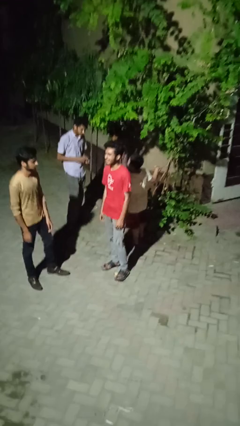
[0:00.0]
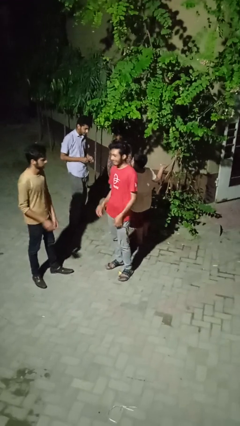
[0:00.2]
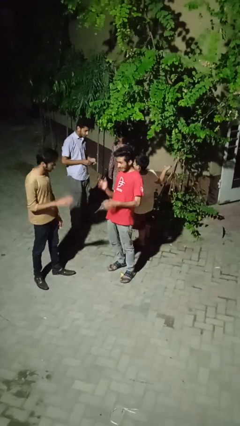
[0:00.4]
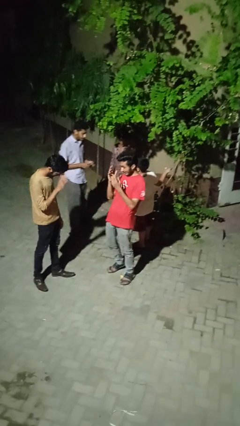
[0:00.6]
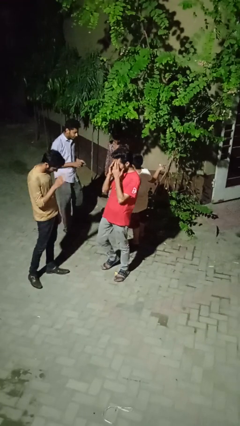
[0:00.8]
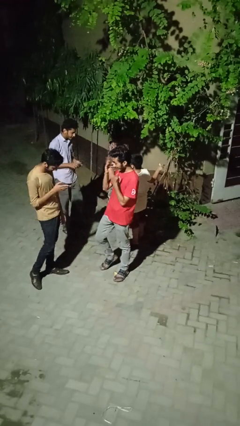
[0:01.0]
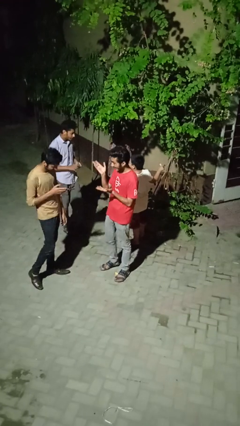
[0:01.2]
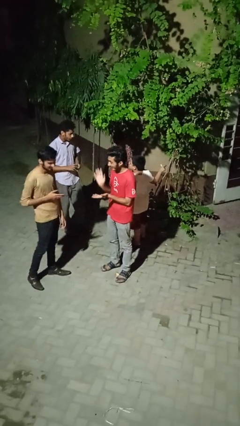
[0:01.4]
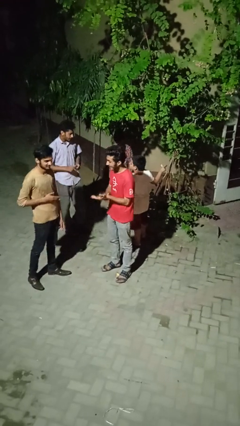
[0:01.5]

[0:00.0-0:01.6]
person laughs with person

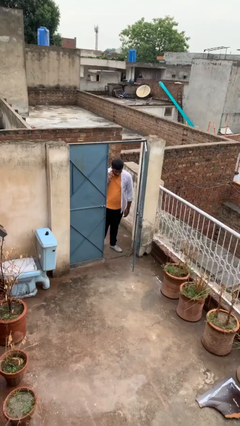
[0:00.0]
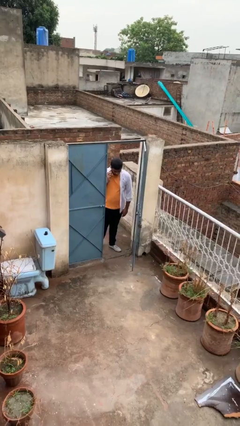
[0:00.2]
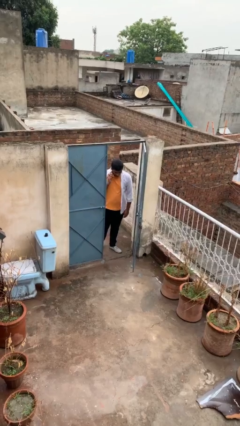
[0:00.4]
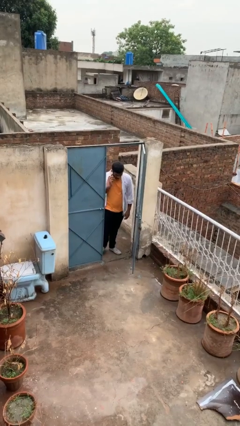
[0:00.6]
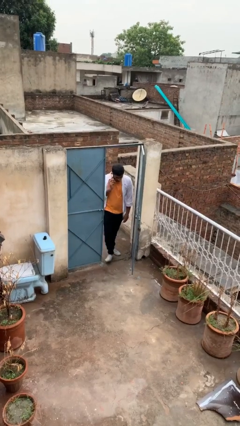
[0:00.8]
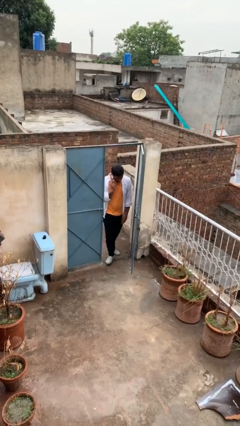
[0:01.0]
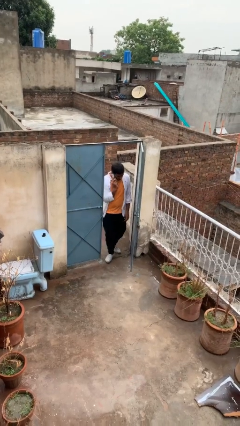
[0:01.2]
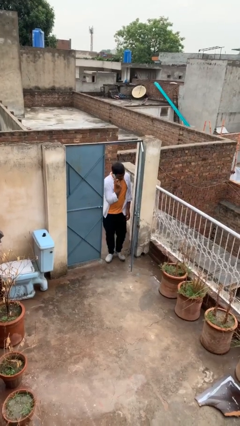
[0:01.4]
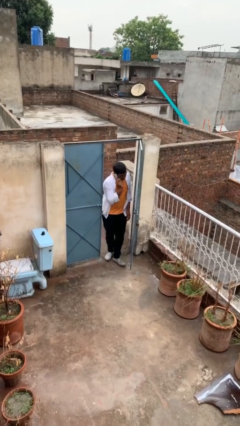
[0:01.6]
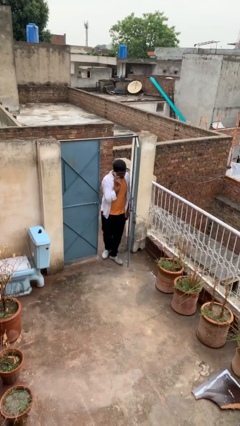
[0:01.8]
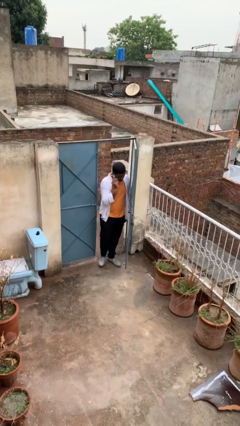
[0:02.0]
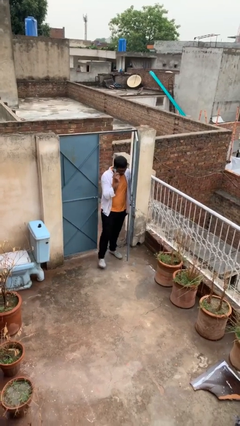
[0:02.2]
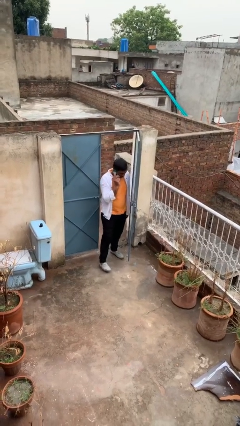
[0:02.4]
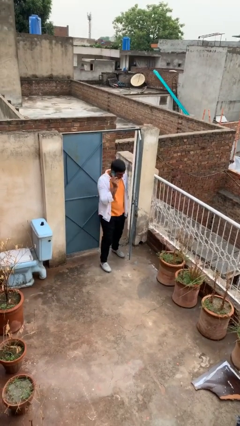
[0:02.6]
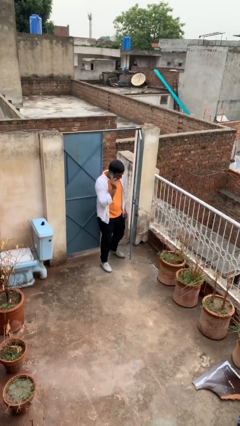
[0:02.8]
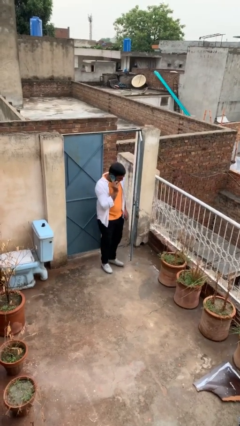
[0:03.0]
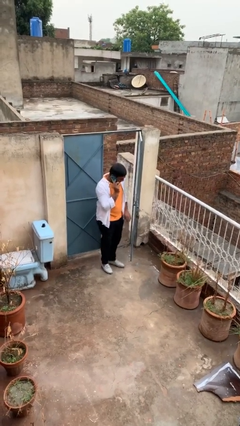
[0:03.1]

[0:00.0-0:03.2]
person enters scene through structure

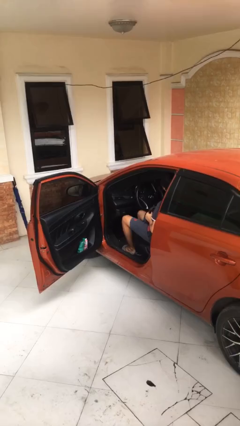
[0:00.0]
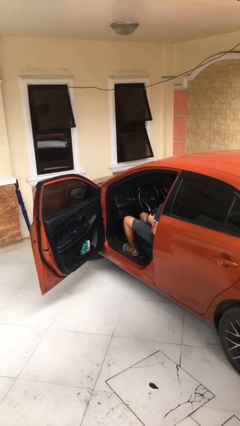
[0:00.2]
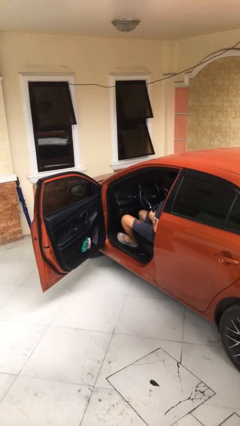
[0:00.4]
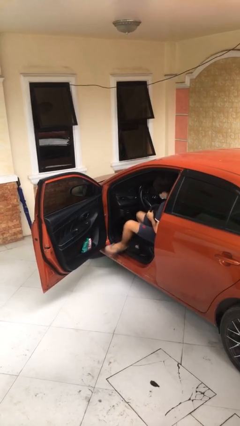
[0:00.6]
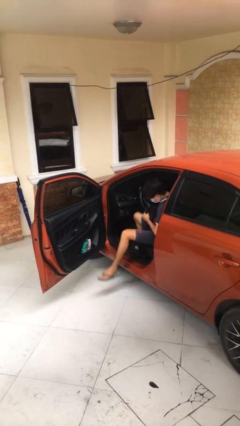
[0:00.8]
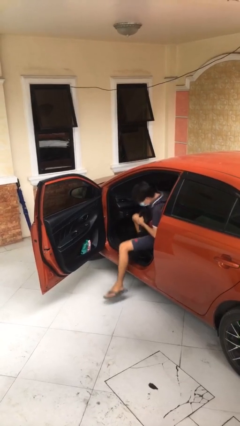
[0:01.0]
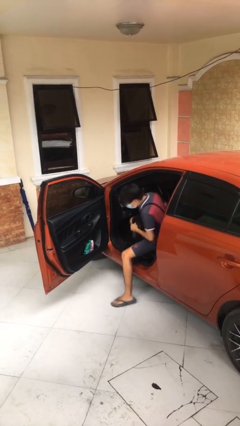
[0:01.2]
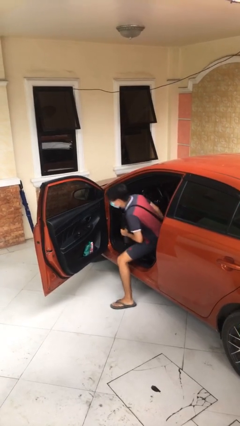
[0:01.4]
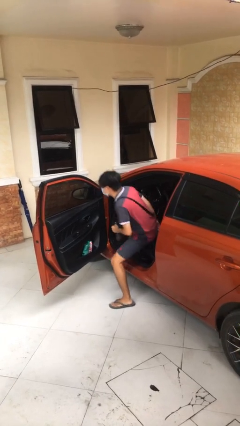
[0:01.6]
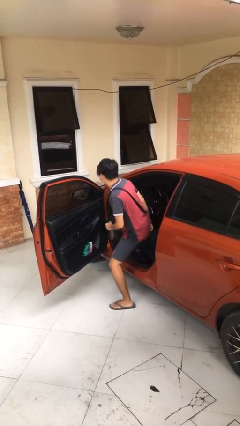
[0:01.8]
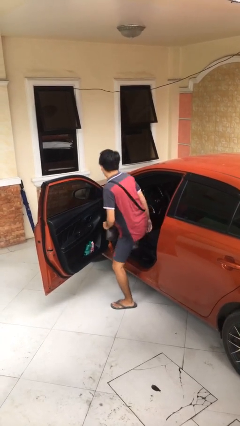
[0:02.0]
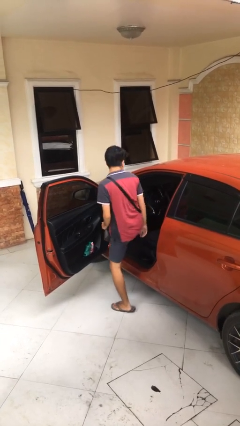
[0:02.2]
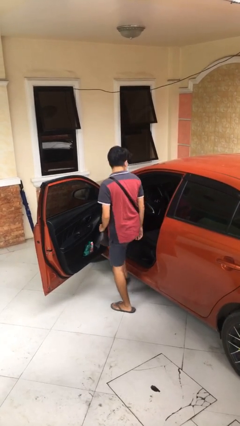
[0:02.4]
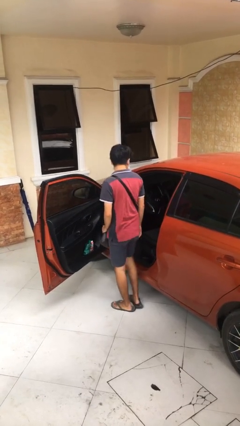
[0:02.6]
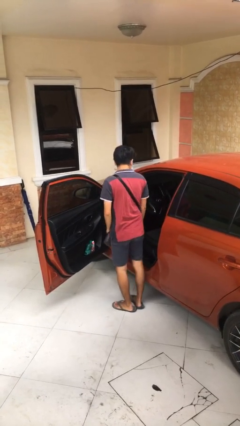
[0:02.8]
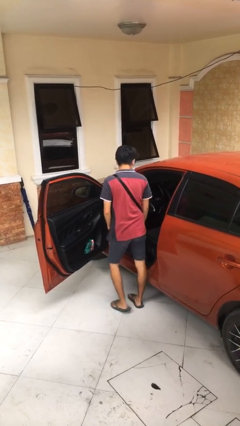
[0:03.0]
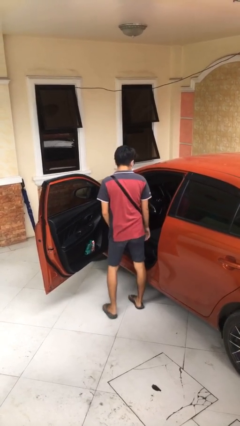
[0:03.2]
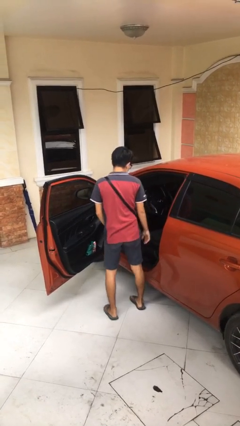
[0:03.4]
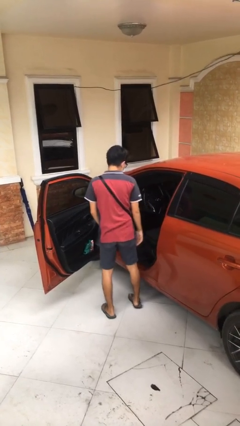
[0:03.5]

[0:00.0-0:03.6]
person exits car

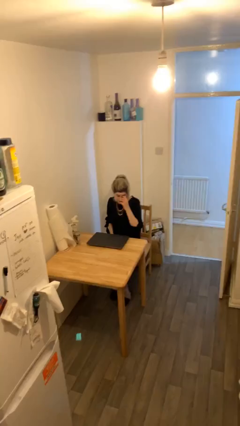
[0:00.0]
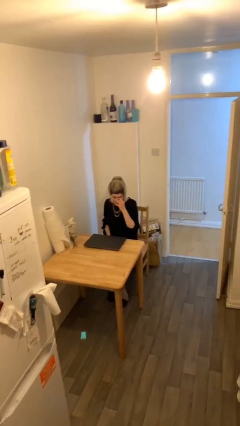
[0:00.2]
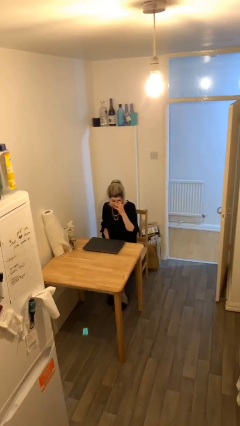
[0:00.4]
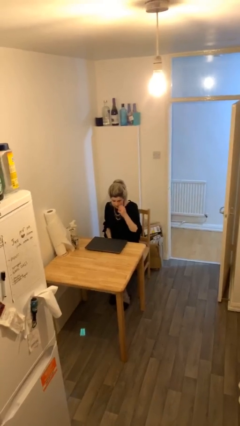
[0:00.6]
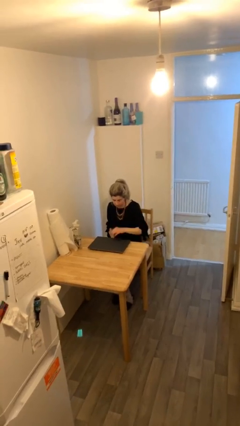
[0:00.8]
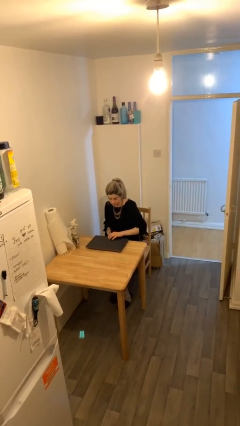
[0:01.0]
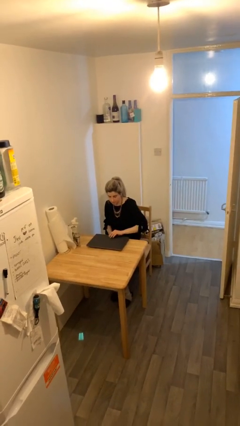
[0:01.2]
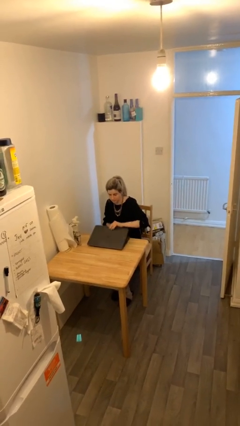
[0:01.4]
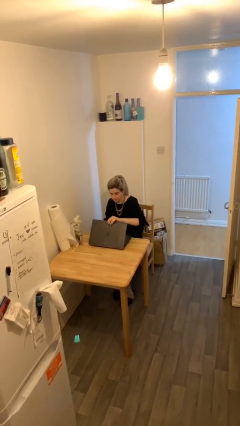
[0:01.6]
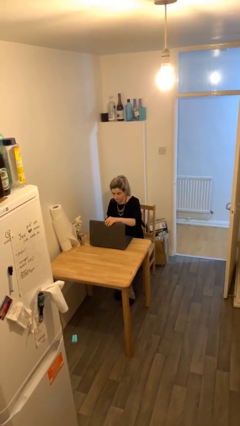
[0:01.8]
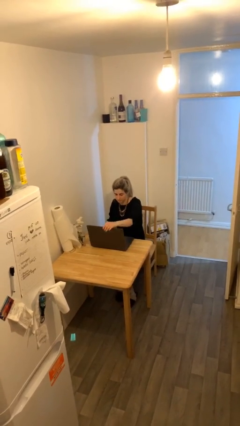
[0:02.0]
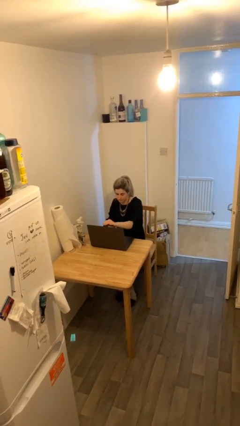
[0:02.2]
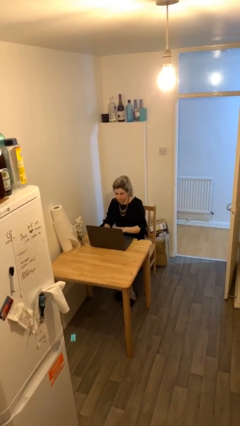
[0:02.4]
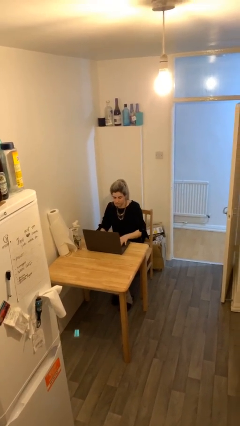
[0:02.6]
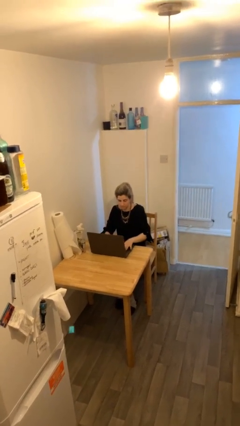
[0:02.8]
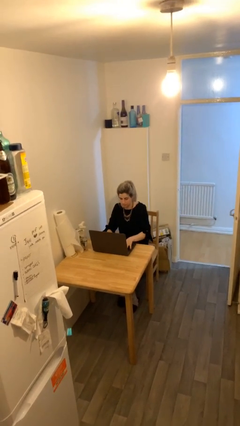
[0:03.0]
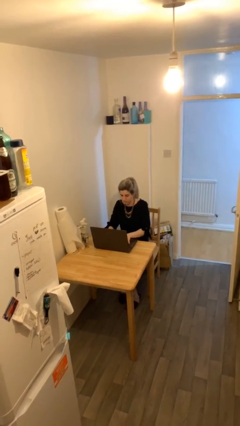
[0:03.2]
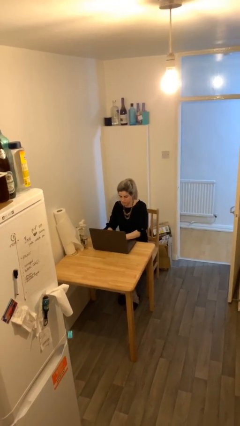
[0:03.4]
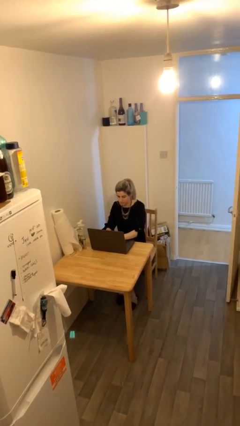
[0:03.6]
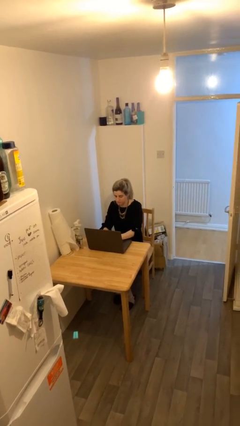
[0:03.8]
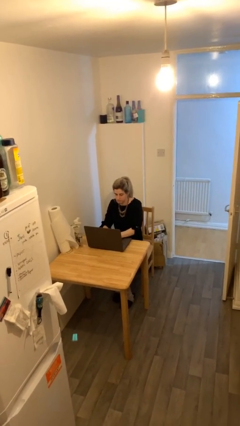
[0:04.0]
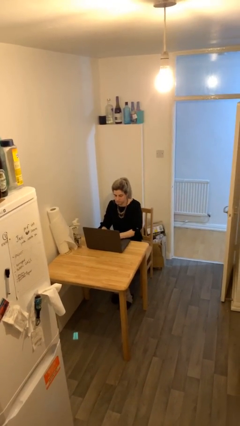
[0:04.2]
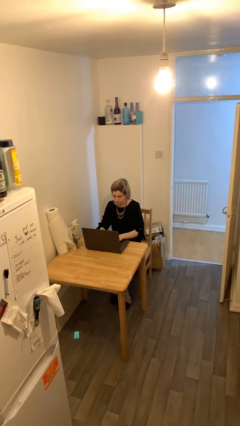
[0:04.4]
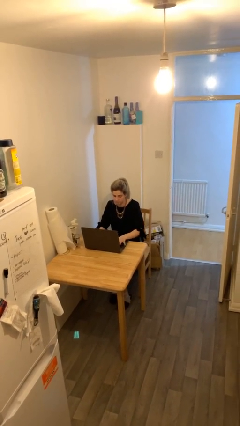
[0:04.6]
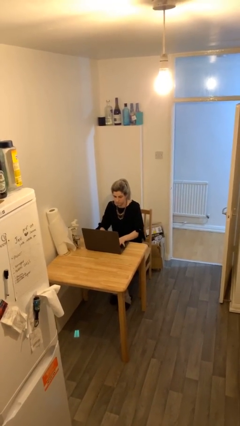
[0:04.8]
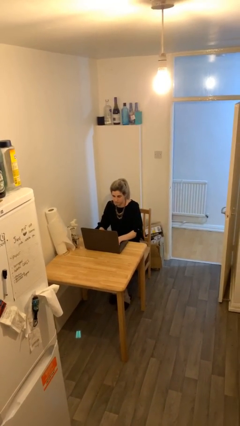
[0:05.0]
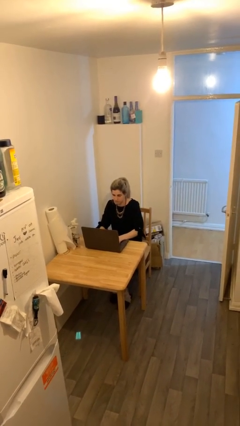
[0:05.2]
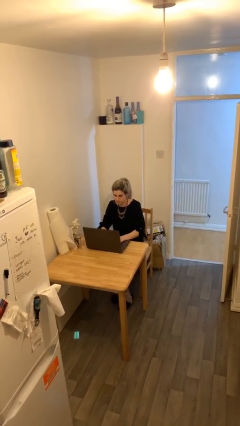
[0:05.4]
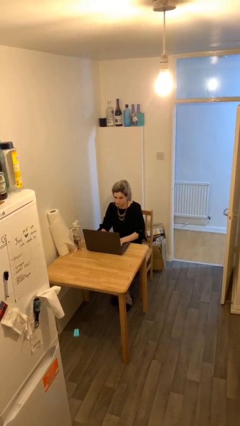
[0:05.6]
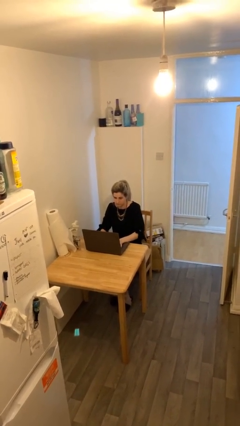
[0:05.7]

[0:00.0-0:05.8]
person interacts with laptop

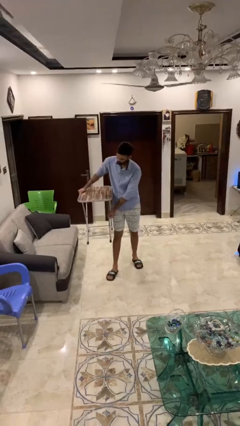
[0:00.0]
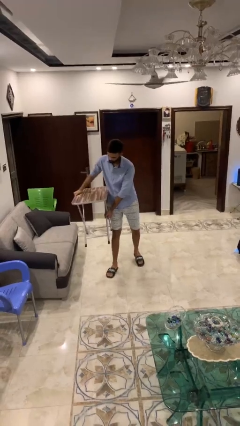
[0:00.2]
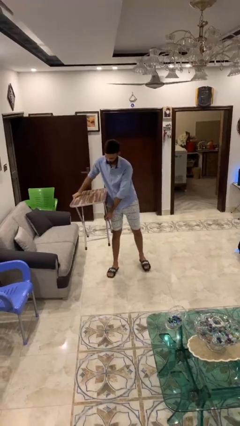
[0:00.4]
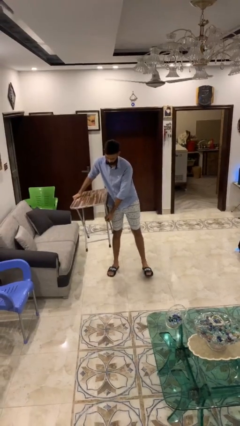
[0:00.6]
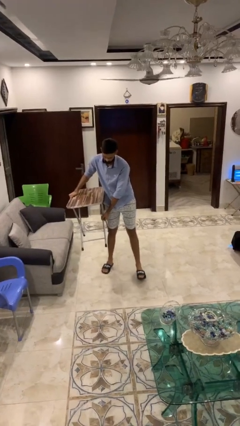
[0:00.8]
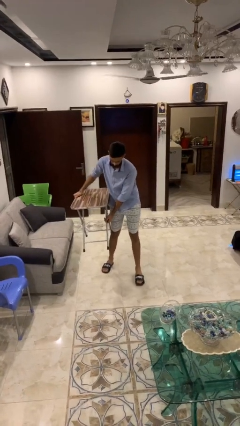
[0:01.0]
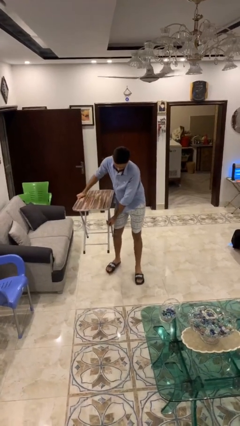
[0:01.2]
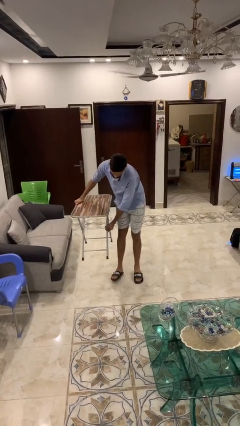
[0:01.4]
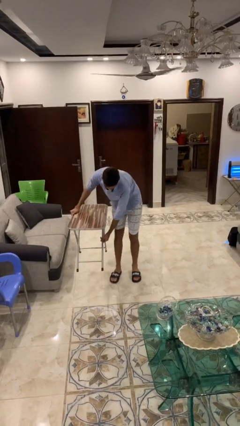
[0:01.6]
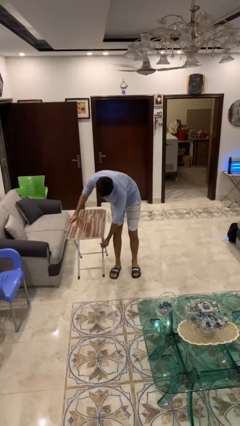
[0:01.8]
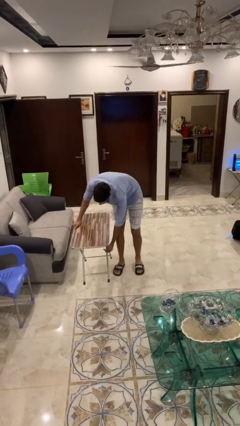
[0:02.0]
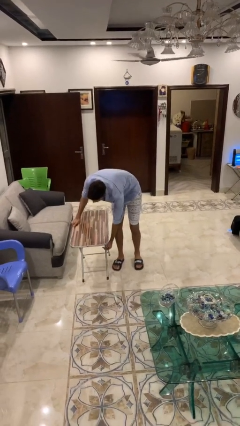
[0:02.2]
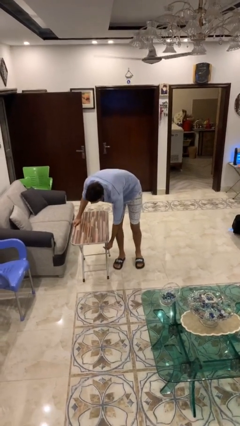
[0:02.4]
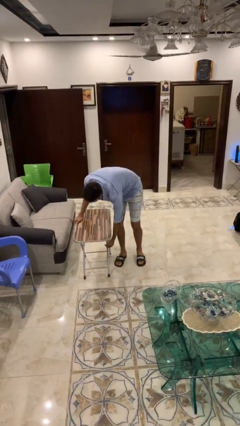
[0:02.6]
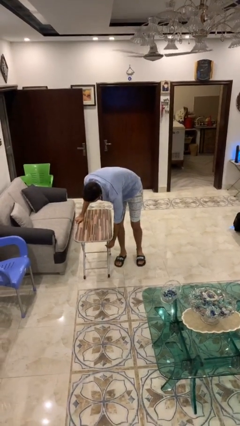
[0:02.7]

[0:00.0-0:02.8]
person puts down object on floor

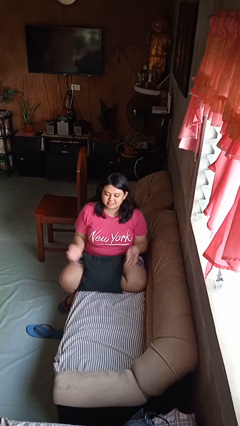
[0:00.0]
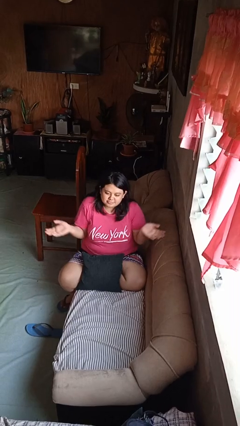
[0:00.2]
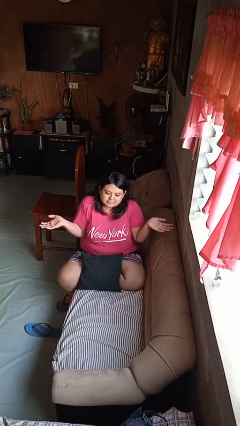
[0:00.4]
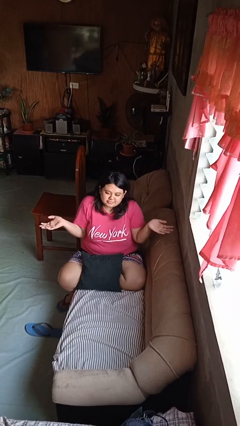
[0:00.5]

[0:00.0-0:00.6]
person shrugs
